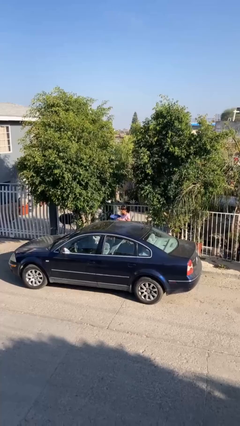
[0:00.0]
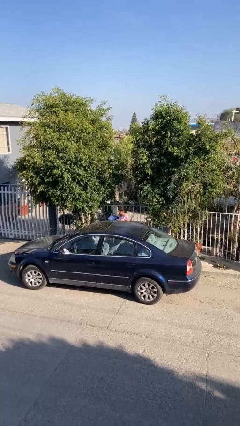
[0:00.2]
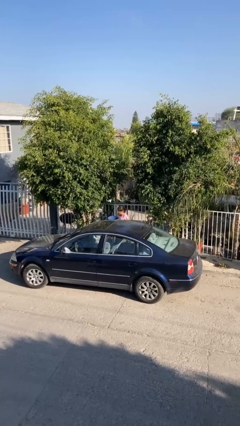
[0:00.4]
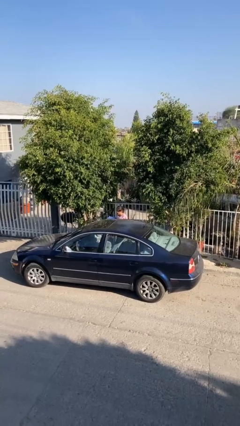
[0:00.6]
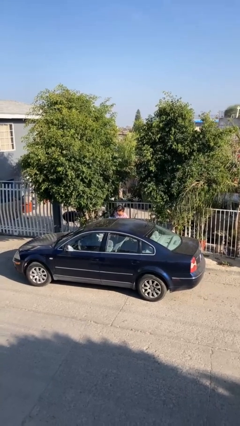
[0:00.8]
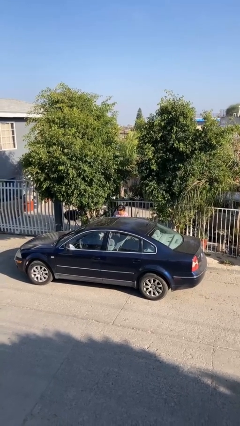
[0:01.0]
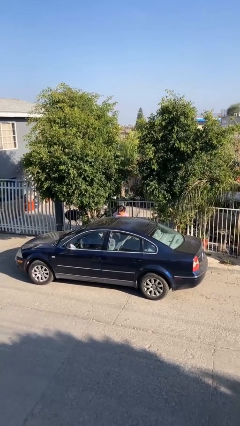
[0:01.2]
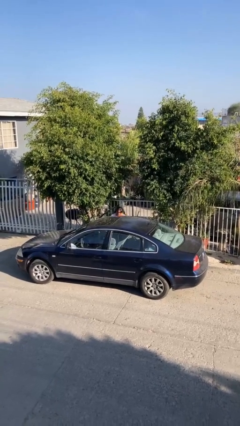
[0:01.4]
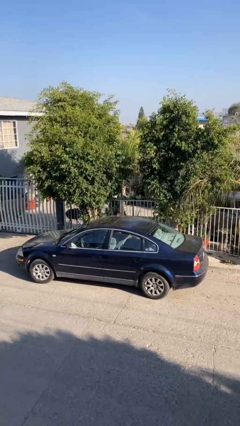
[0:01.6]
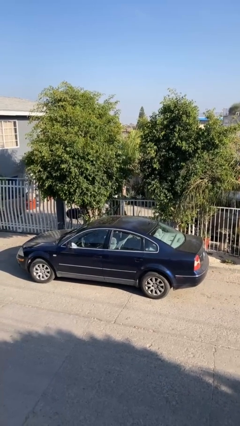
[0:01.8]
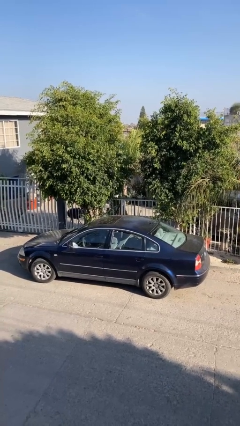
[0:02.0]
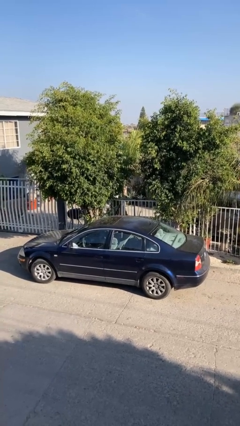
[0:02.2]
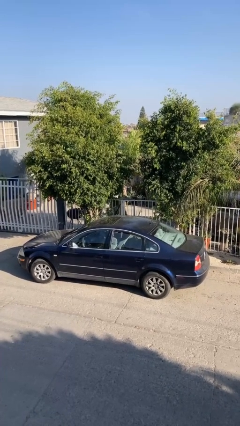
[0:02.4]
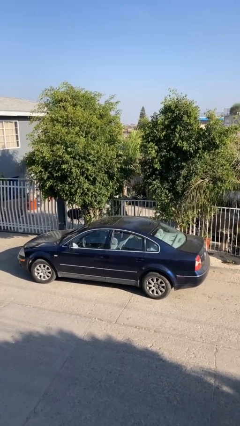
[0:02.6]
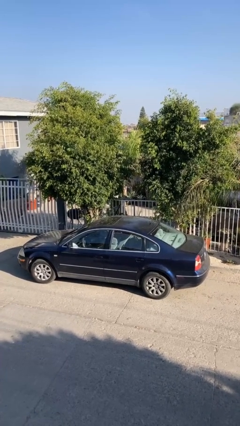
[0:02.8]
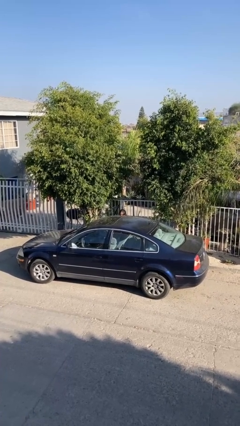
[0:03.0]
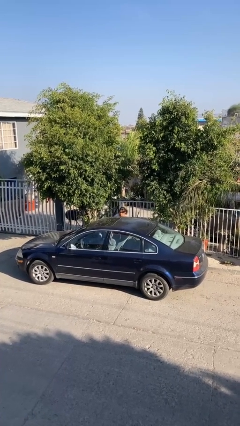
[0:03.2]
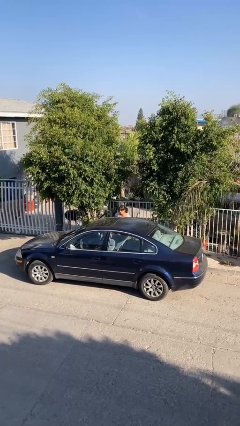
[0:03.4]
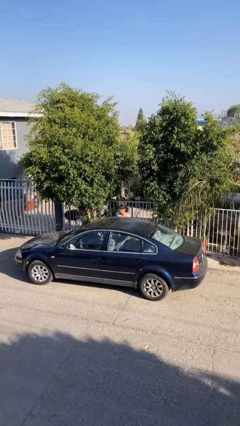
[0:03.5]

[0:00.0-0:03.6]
person loads car

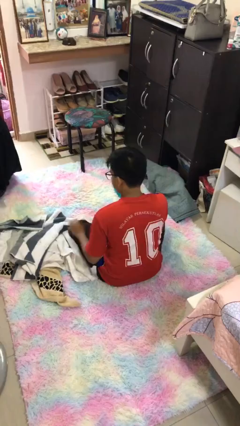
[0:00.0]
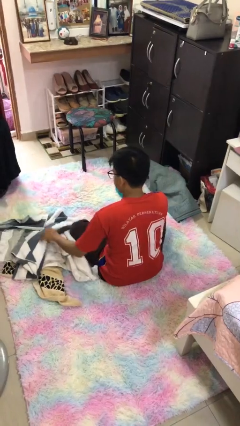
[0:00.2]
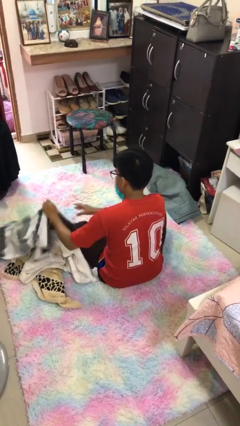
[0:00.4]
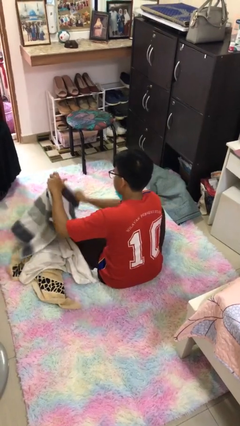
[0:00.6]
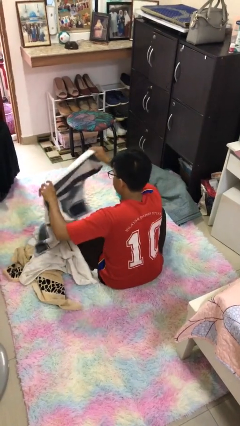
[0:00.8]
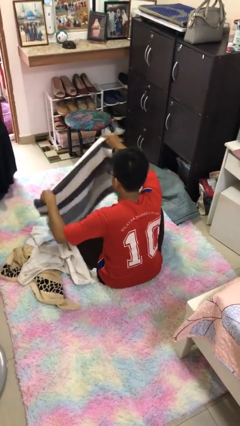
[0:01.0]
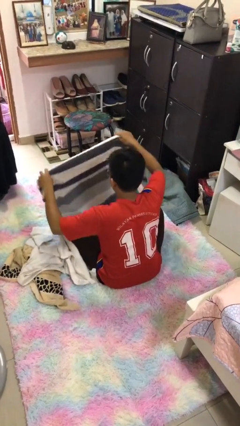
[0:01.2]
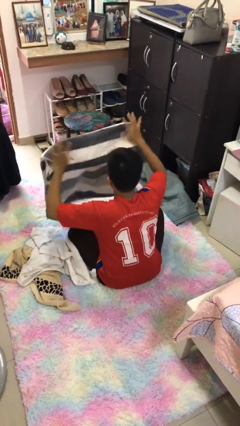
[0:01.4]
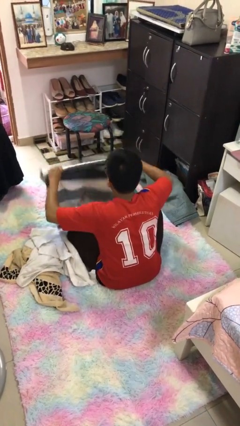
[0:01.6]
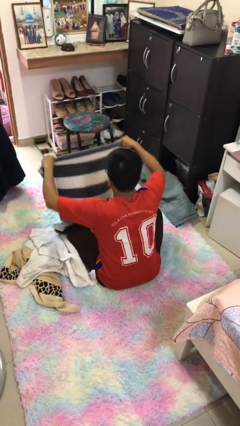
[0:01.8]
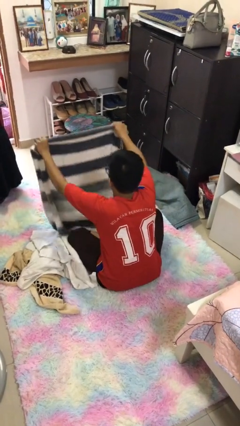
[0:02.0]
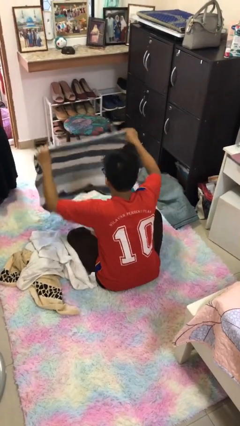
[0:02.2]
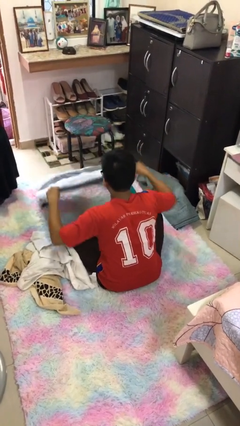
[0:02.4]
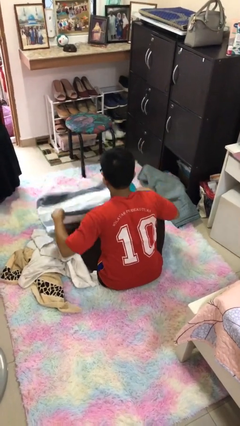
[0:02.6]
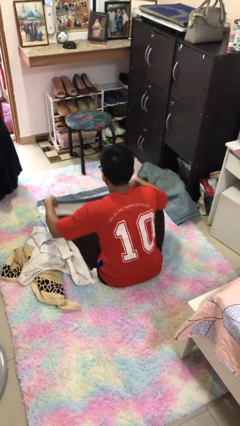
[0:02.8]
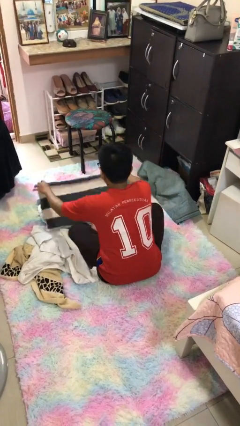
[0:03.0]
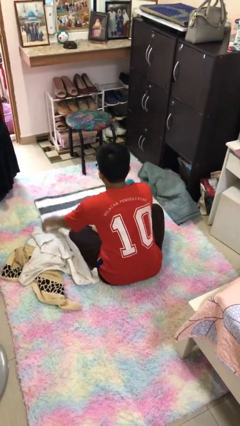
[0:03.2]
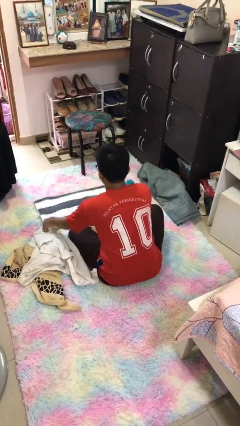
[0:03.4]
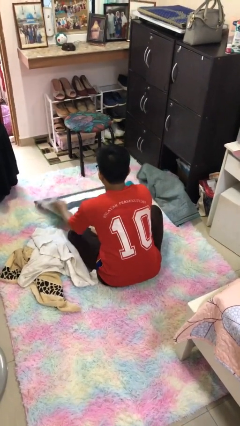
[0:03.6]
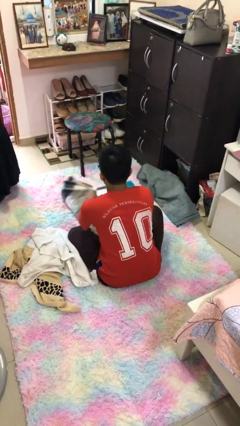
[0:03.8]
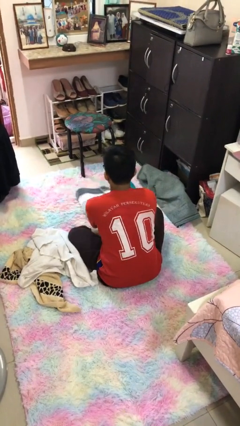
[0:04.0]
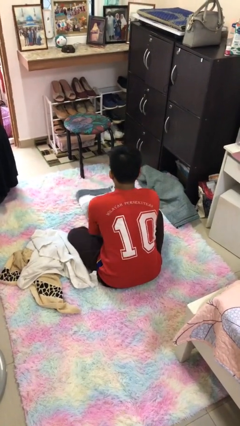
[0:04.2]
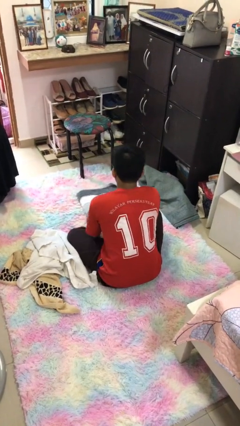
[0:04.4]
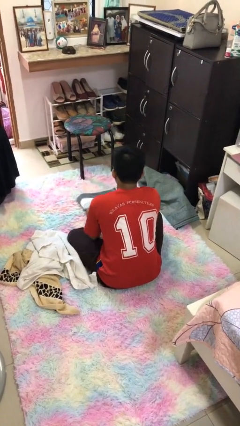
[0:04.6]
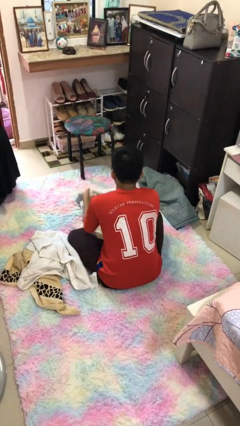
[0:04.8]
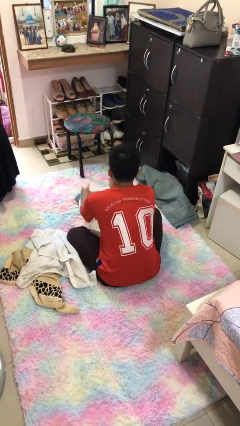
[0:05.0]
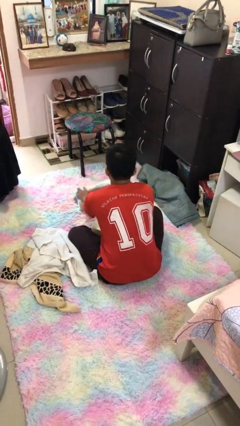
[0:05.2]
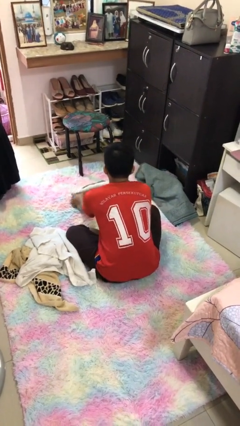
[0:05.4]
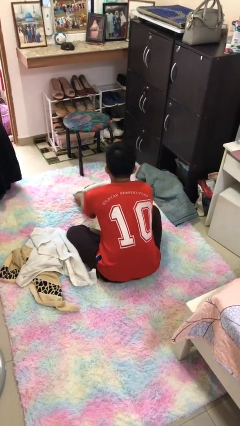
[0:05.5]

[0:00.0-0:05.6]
person folds towel

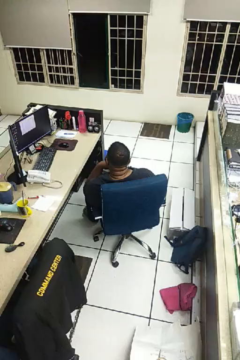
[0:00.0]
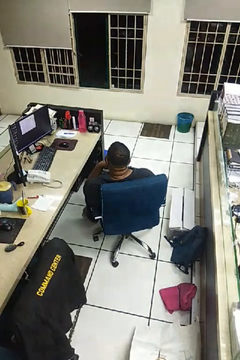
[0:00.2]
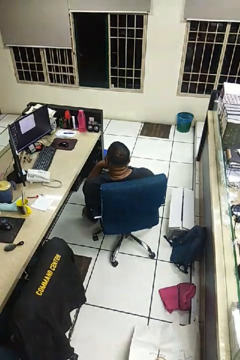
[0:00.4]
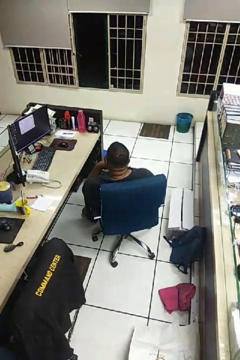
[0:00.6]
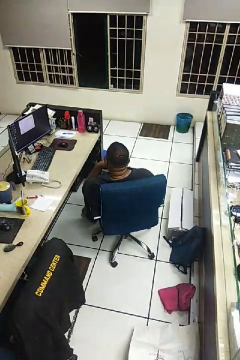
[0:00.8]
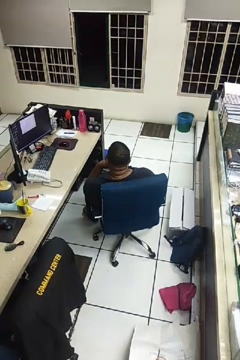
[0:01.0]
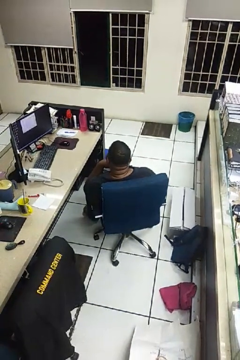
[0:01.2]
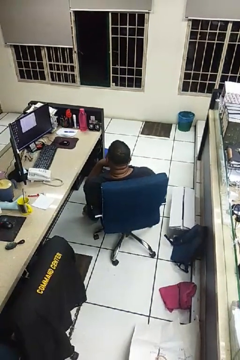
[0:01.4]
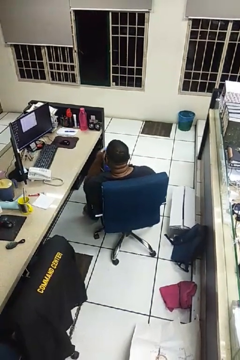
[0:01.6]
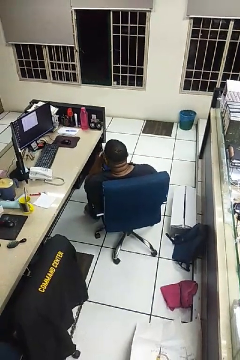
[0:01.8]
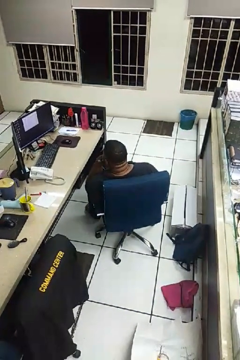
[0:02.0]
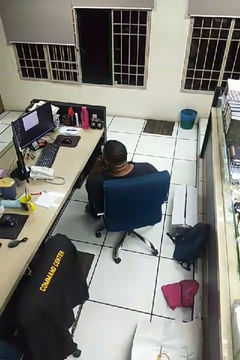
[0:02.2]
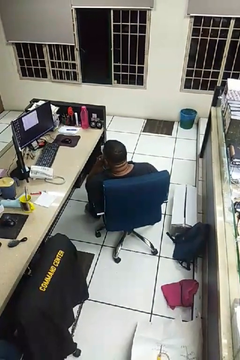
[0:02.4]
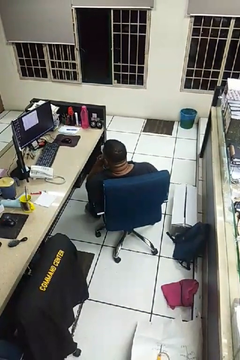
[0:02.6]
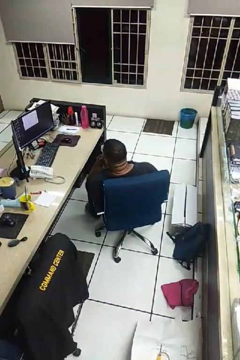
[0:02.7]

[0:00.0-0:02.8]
person blows nose

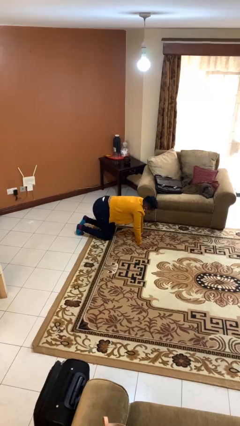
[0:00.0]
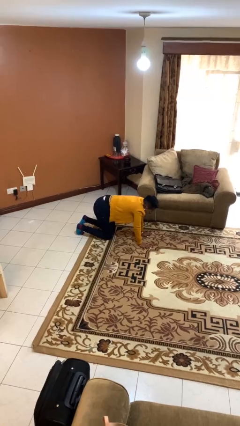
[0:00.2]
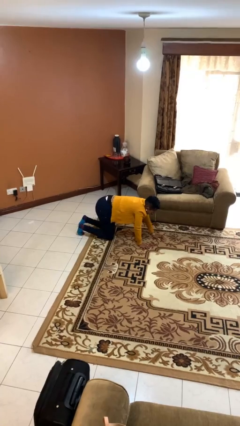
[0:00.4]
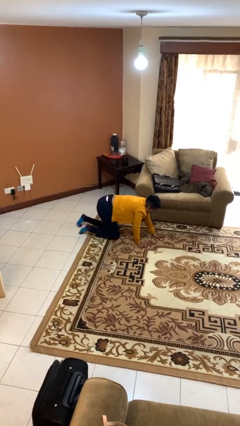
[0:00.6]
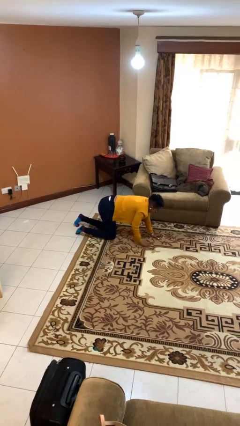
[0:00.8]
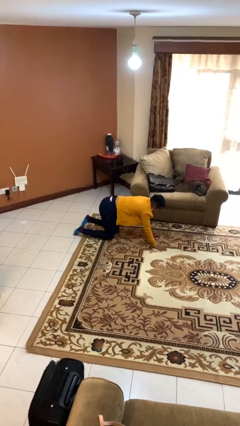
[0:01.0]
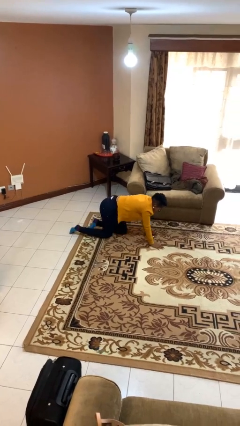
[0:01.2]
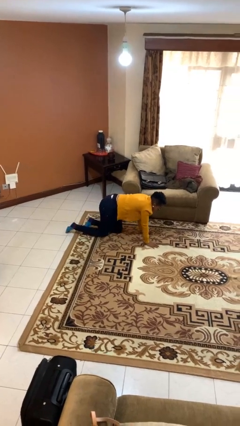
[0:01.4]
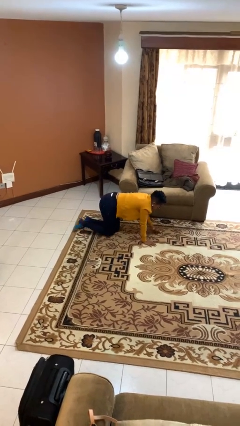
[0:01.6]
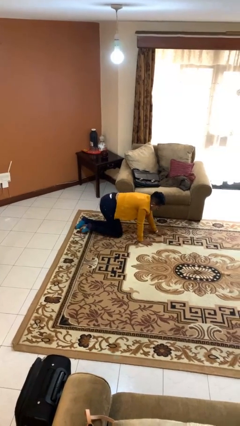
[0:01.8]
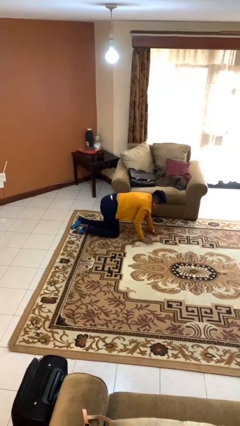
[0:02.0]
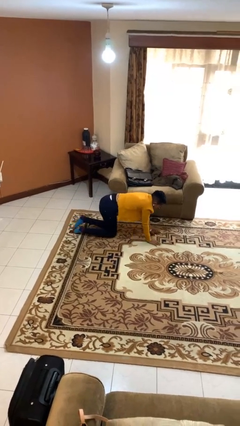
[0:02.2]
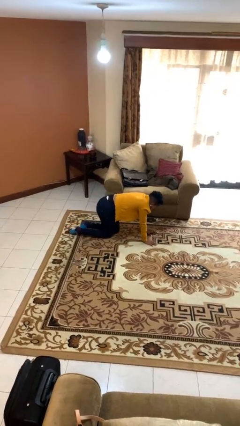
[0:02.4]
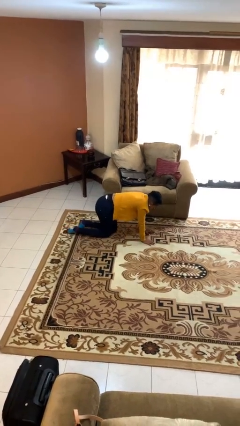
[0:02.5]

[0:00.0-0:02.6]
person crawls

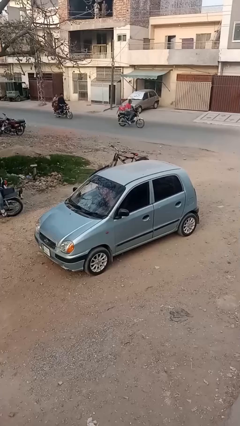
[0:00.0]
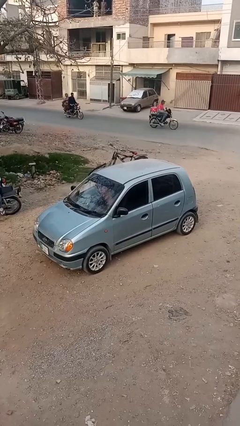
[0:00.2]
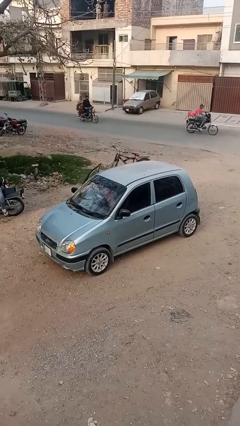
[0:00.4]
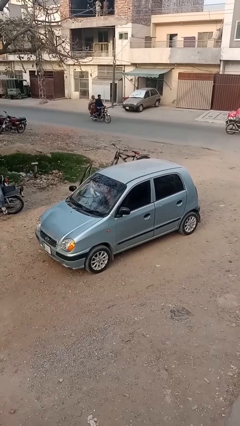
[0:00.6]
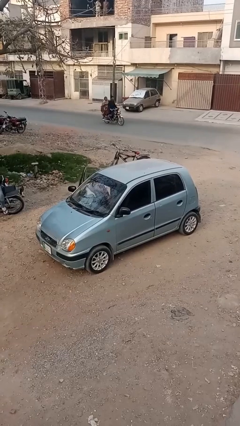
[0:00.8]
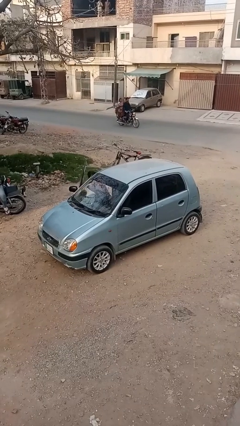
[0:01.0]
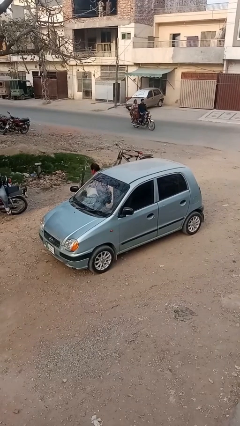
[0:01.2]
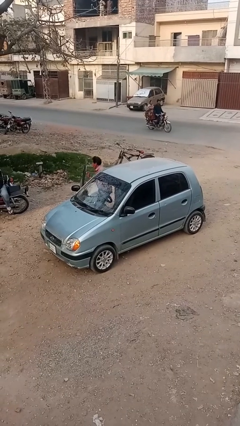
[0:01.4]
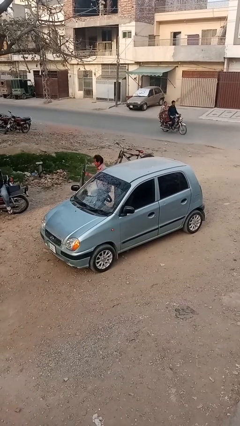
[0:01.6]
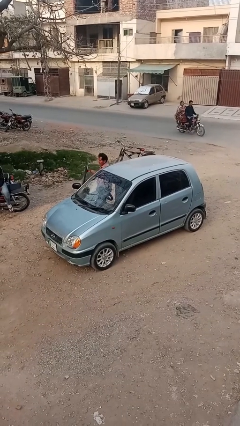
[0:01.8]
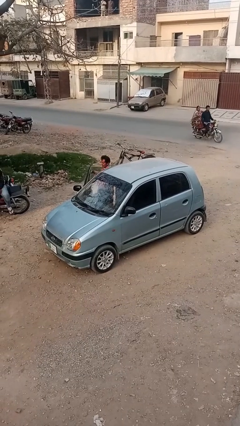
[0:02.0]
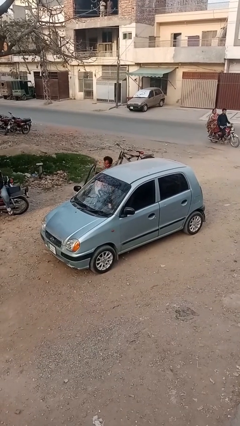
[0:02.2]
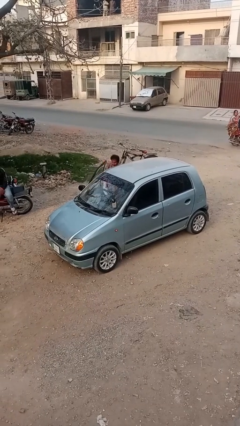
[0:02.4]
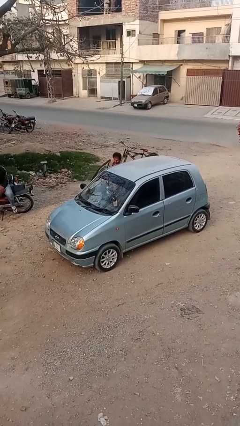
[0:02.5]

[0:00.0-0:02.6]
car drops off person

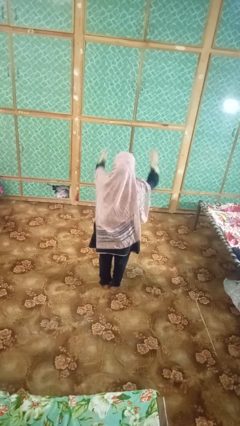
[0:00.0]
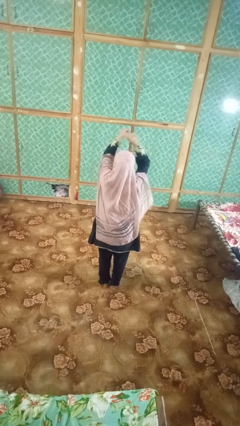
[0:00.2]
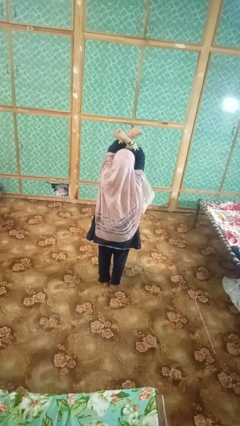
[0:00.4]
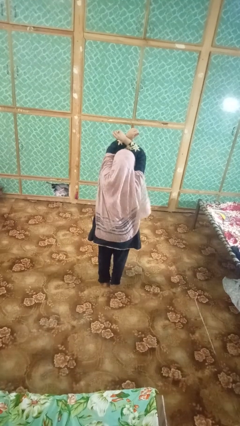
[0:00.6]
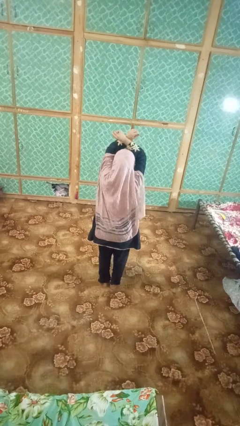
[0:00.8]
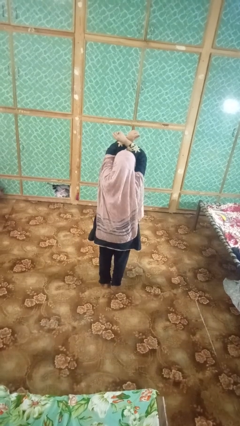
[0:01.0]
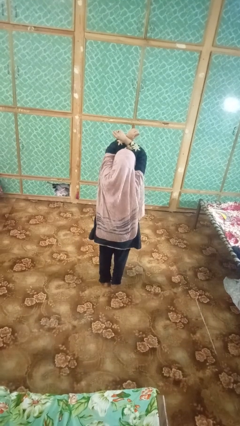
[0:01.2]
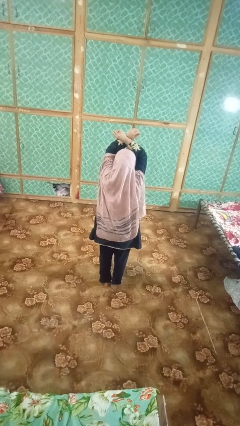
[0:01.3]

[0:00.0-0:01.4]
person gestures arms x
